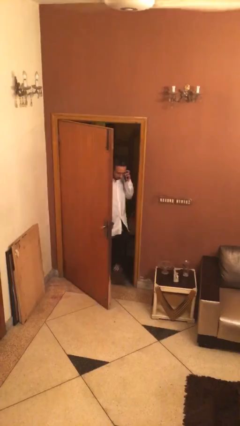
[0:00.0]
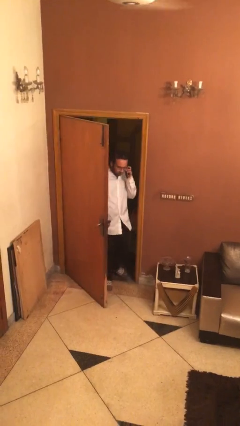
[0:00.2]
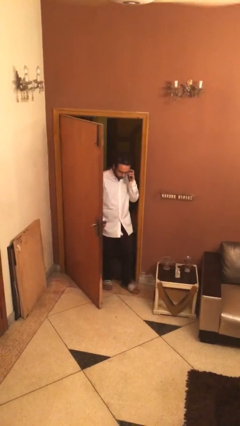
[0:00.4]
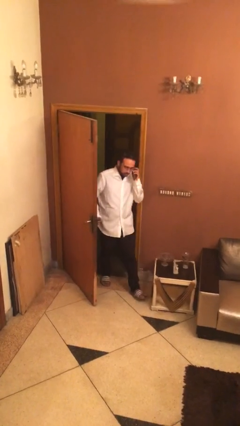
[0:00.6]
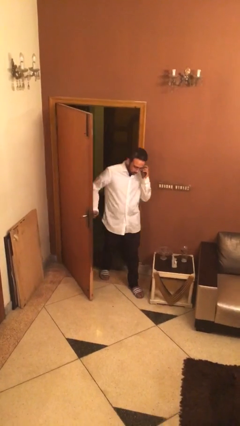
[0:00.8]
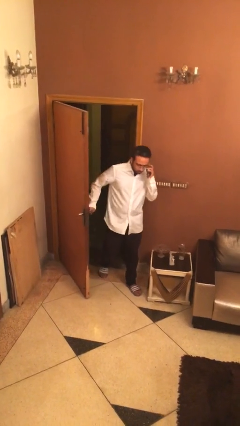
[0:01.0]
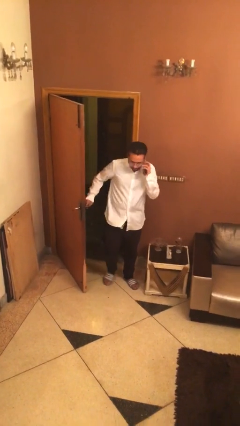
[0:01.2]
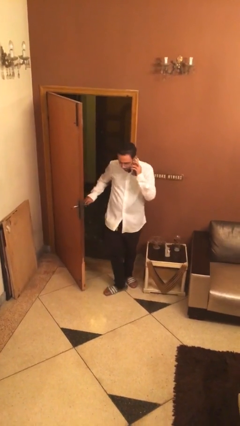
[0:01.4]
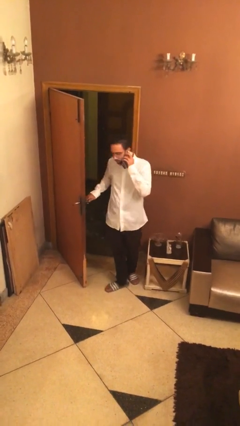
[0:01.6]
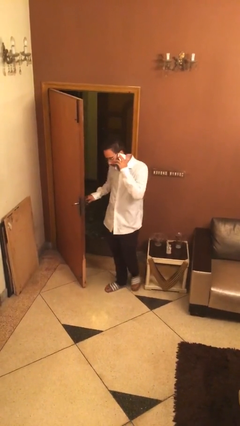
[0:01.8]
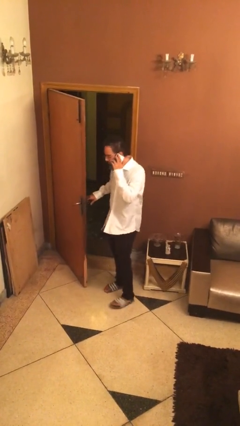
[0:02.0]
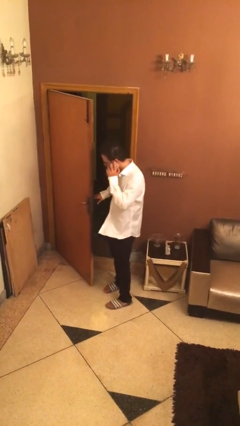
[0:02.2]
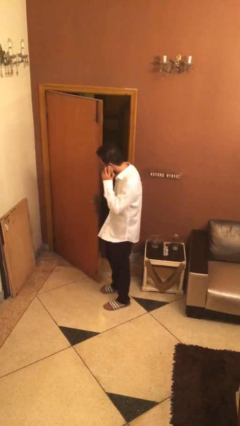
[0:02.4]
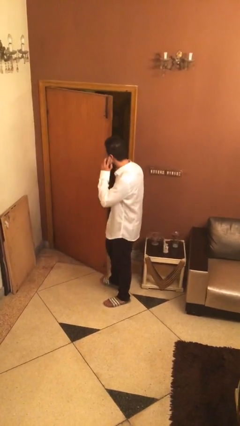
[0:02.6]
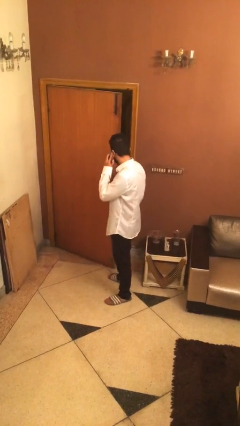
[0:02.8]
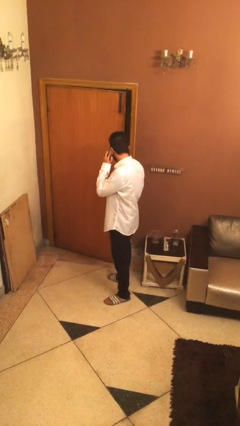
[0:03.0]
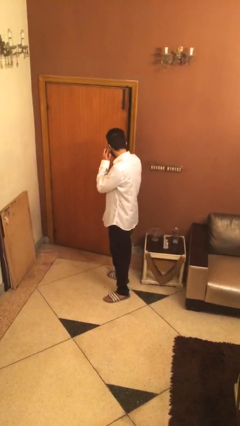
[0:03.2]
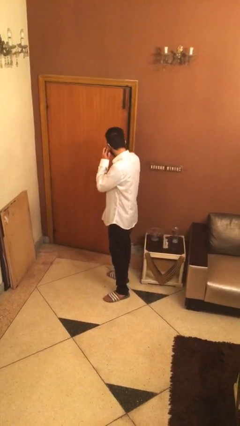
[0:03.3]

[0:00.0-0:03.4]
person enters scene through structure

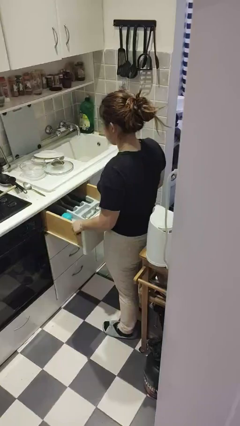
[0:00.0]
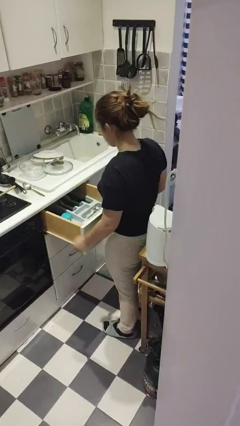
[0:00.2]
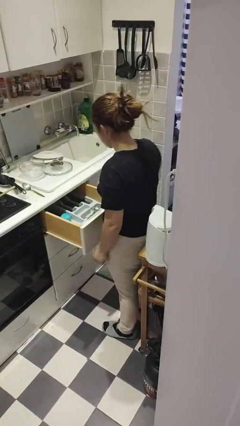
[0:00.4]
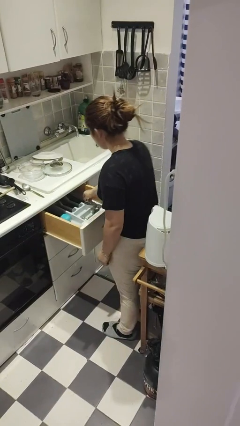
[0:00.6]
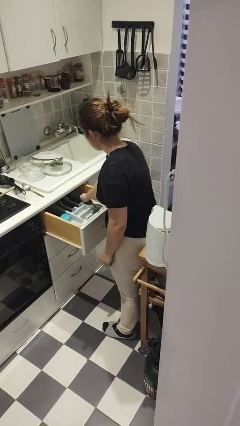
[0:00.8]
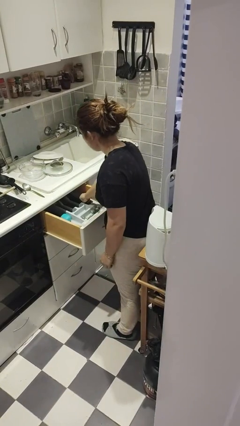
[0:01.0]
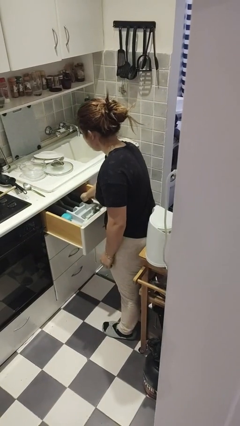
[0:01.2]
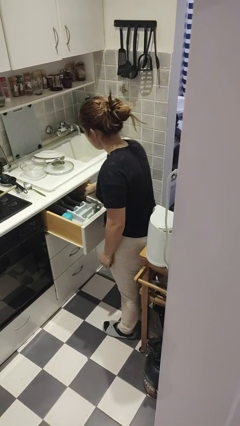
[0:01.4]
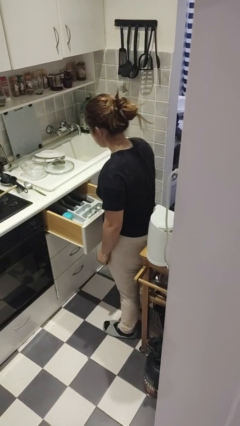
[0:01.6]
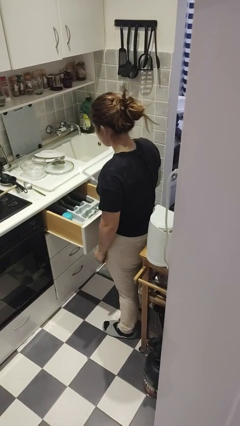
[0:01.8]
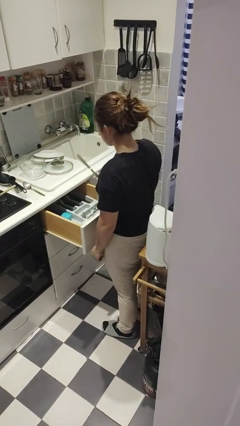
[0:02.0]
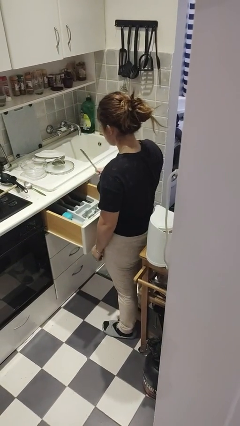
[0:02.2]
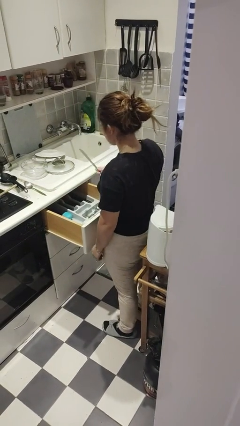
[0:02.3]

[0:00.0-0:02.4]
person takes object from kitchen drawer

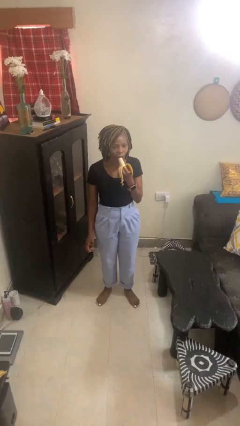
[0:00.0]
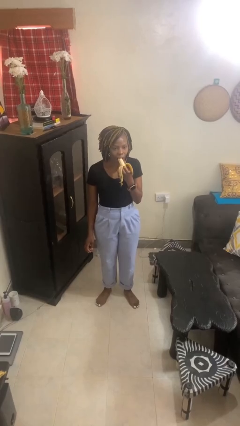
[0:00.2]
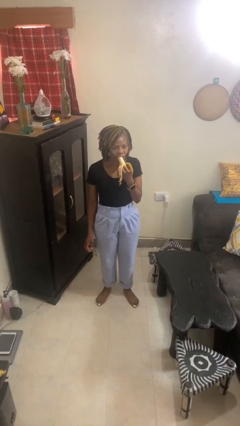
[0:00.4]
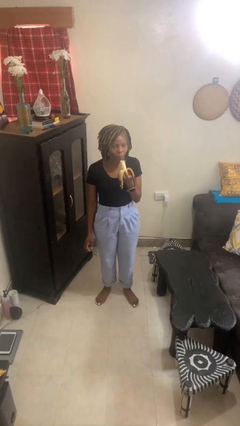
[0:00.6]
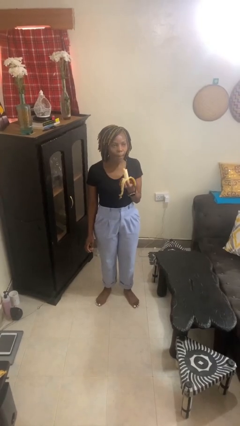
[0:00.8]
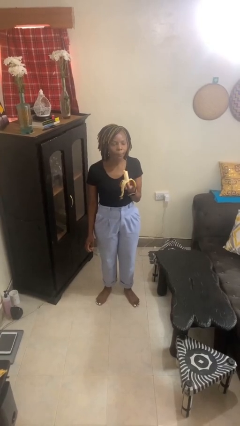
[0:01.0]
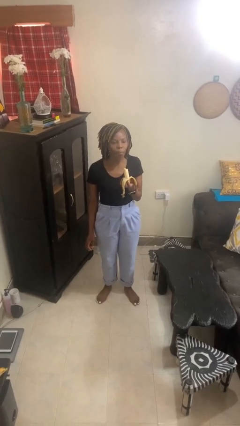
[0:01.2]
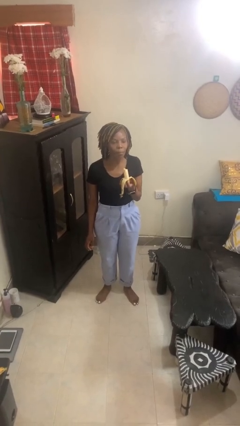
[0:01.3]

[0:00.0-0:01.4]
person eats banana

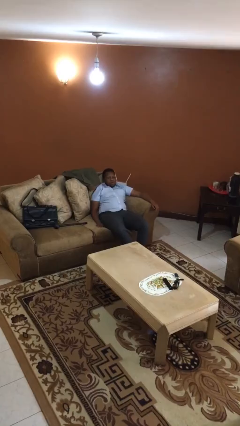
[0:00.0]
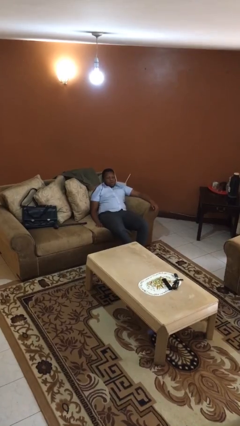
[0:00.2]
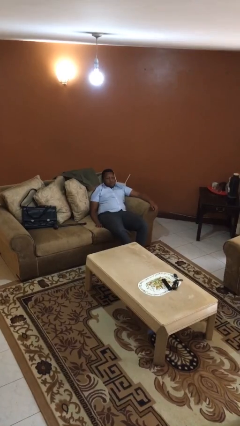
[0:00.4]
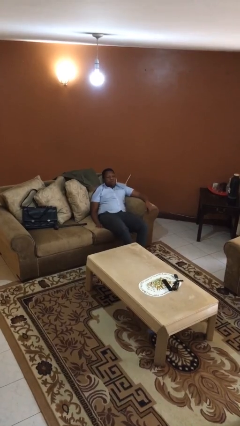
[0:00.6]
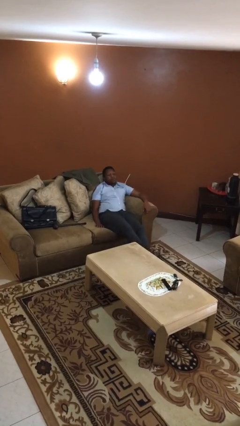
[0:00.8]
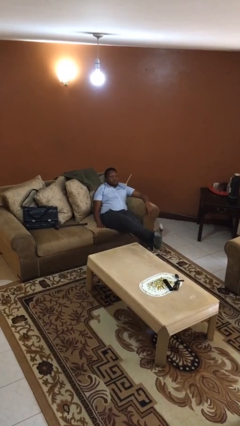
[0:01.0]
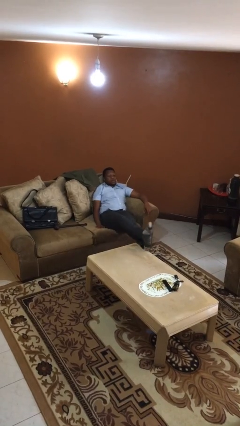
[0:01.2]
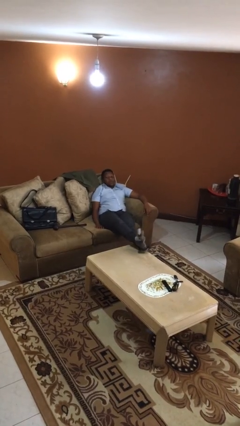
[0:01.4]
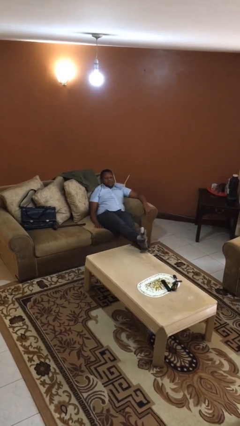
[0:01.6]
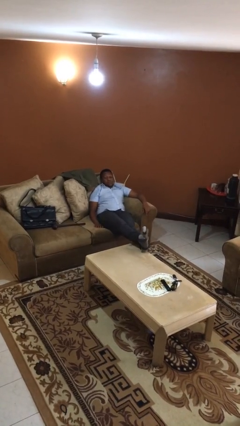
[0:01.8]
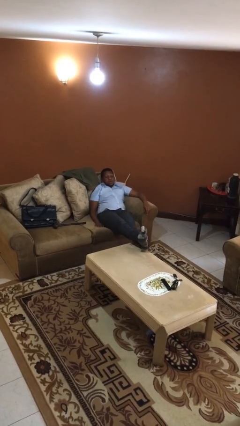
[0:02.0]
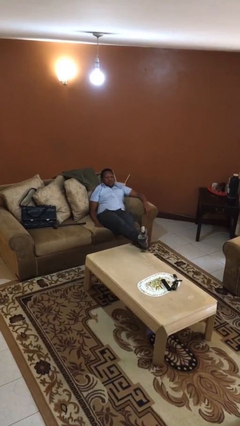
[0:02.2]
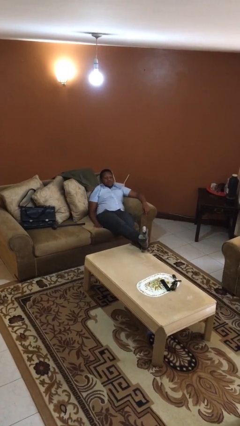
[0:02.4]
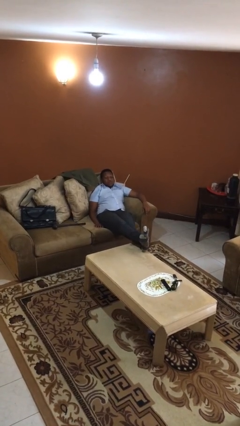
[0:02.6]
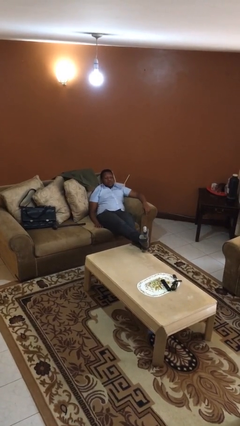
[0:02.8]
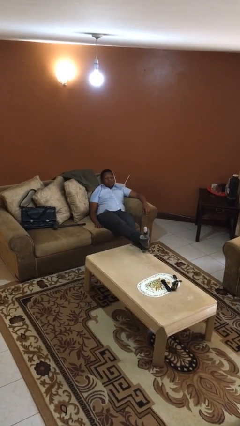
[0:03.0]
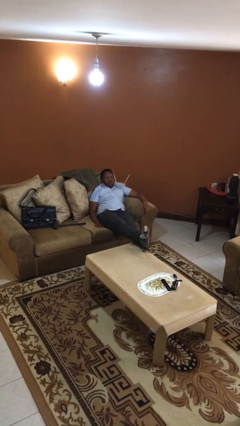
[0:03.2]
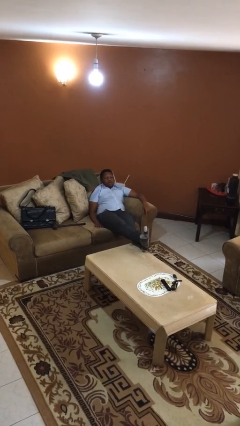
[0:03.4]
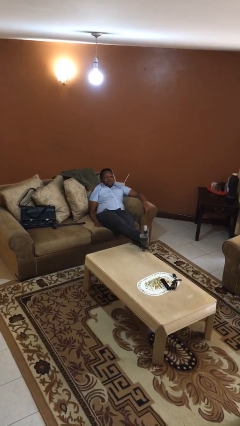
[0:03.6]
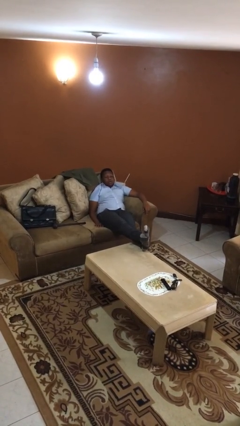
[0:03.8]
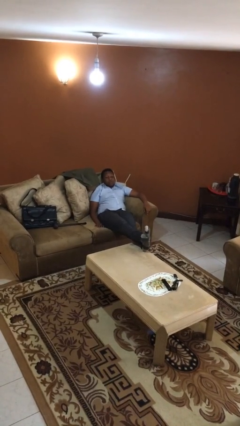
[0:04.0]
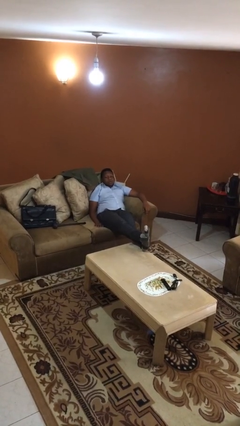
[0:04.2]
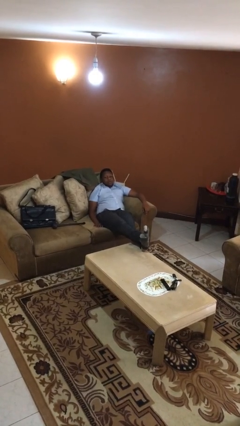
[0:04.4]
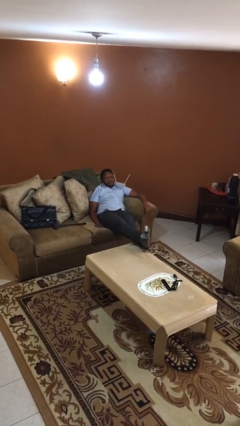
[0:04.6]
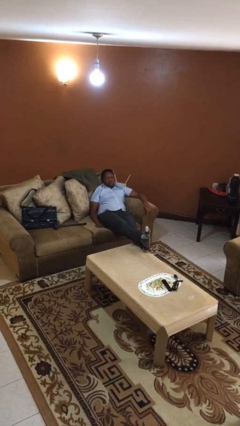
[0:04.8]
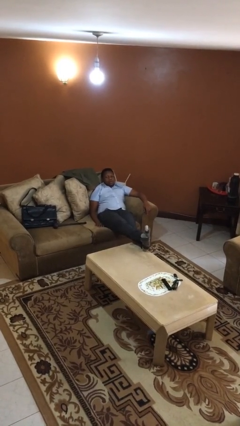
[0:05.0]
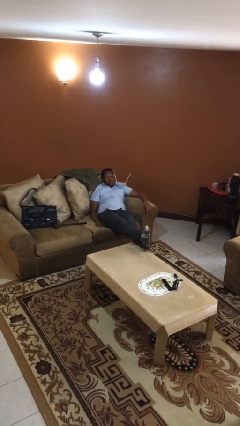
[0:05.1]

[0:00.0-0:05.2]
person puts feet up

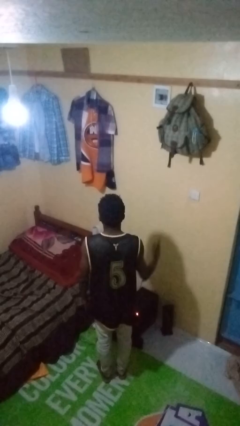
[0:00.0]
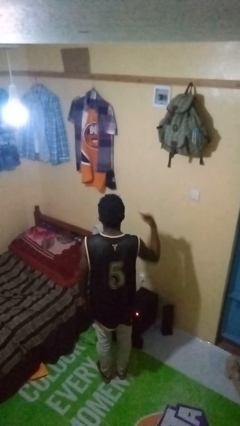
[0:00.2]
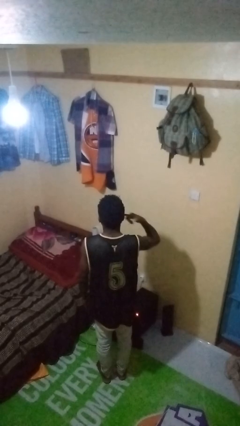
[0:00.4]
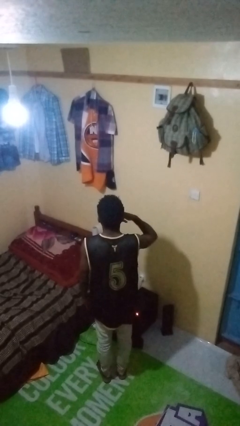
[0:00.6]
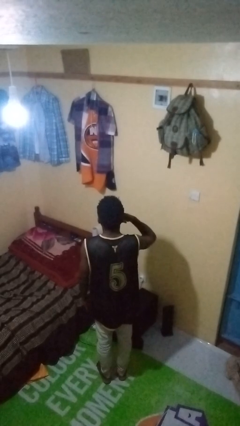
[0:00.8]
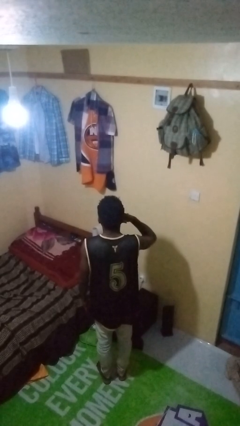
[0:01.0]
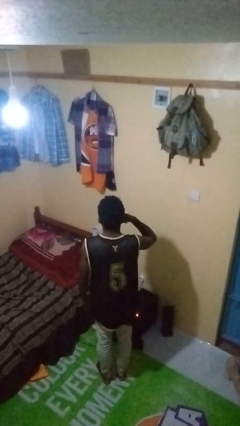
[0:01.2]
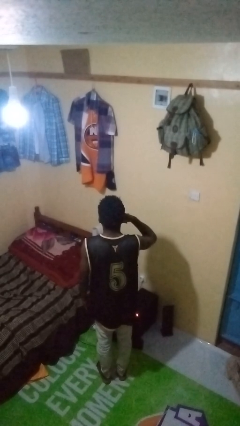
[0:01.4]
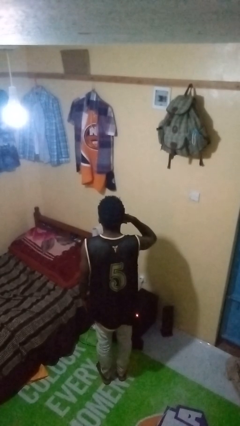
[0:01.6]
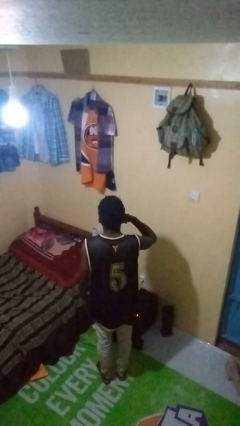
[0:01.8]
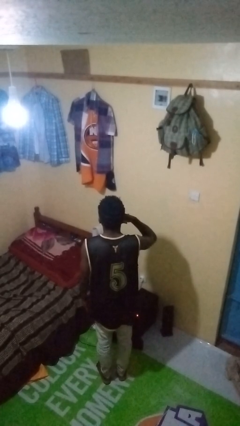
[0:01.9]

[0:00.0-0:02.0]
person gestures call me

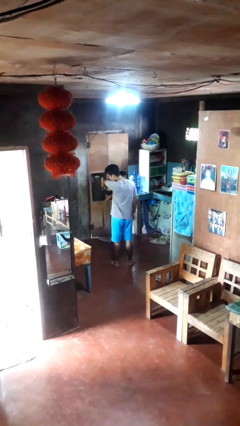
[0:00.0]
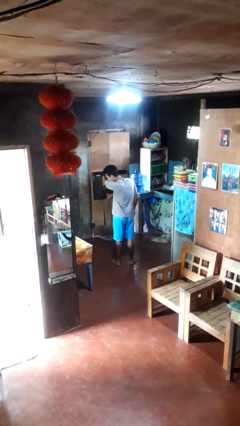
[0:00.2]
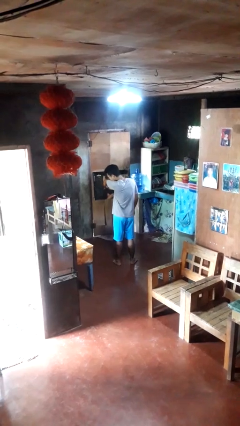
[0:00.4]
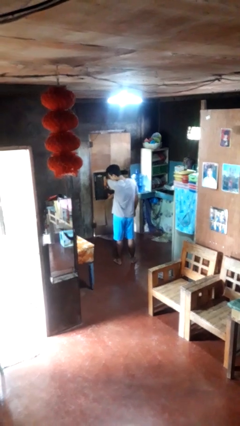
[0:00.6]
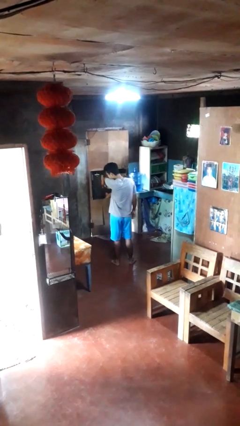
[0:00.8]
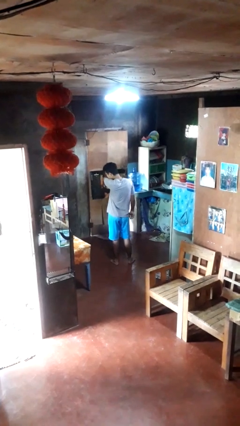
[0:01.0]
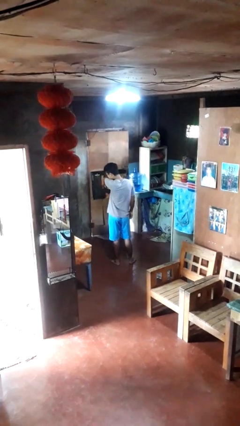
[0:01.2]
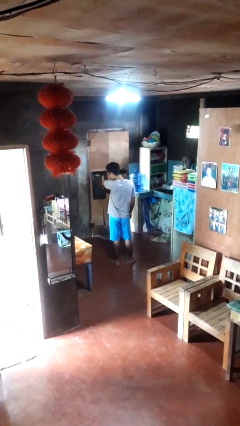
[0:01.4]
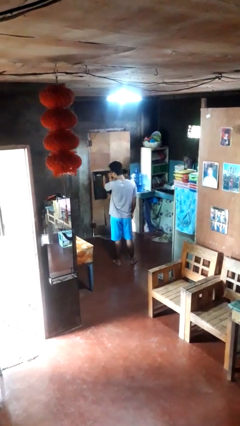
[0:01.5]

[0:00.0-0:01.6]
person sneezes into arm

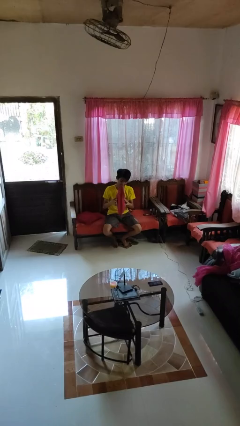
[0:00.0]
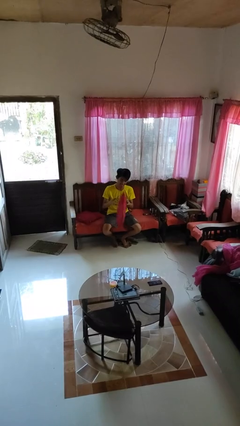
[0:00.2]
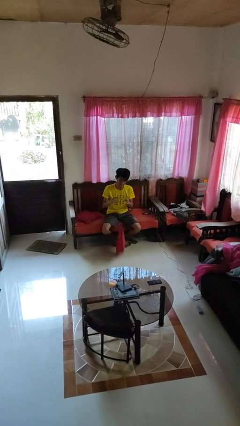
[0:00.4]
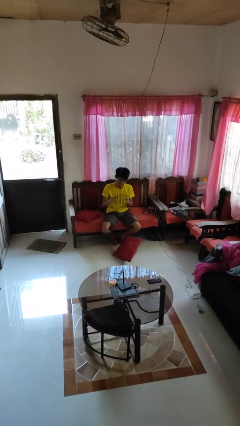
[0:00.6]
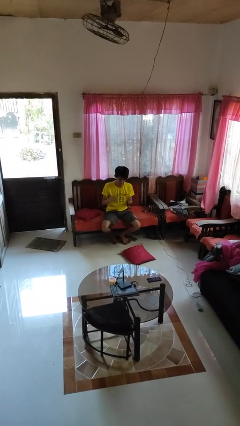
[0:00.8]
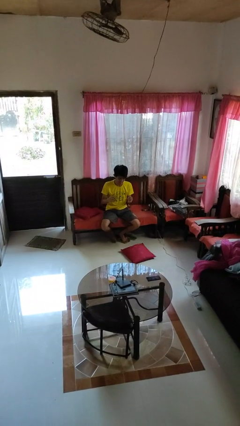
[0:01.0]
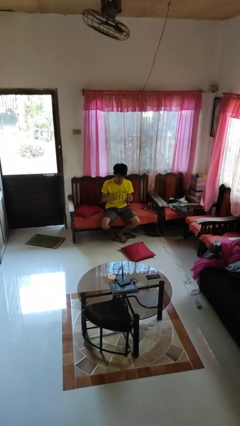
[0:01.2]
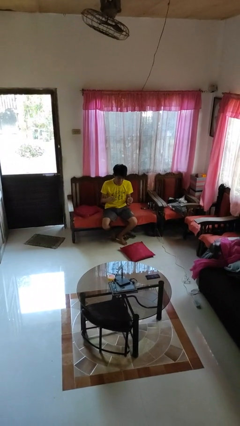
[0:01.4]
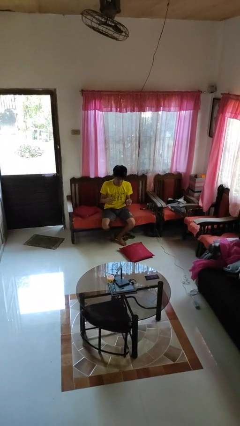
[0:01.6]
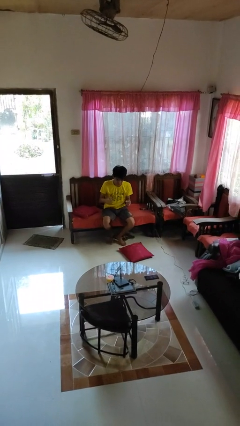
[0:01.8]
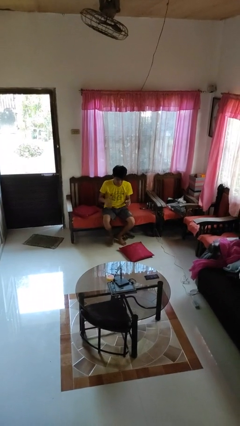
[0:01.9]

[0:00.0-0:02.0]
person drops object
